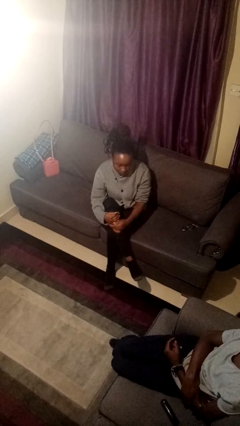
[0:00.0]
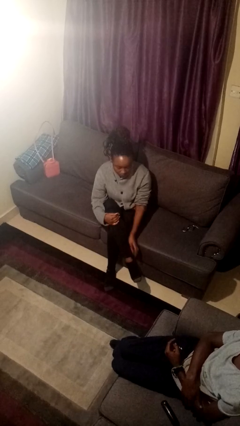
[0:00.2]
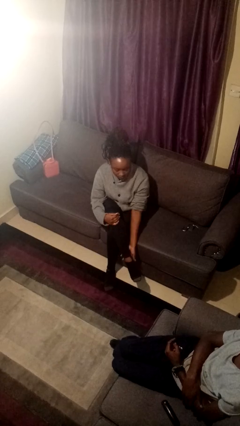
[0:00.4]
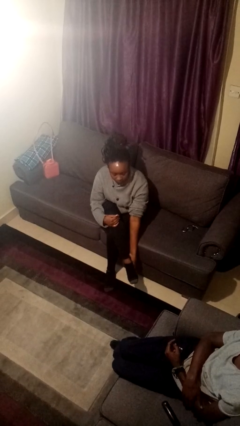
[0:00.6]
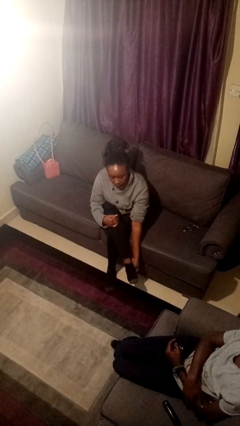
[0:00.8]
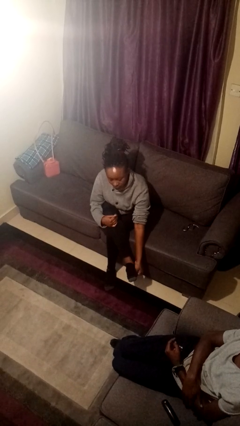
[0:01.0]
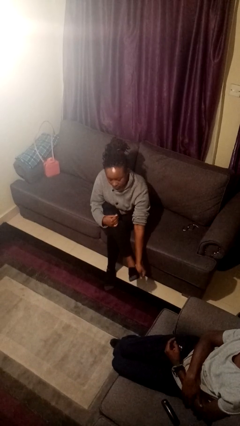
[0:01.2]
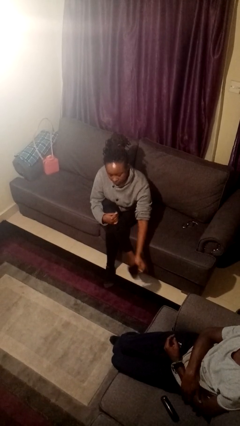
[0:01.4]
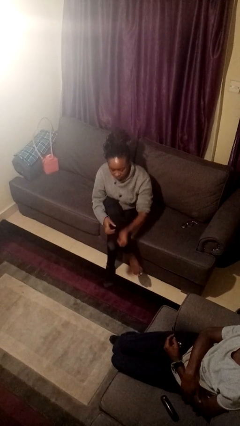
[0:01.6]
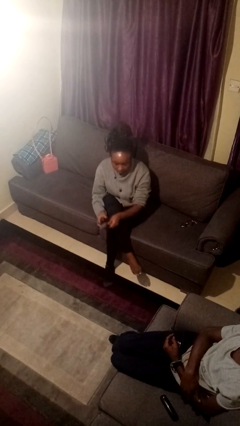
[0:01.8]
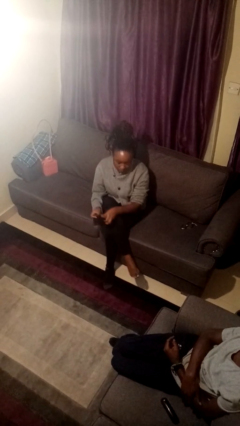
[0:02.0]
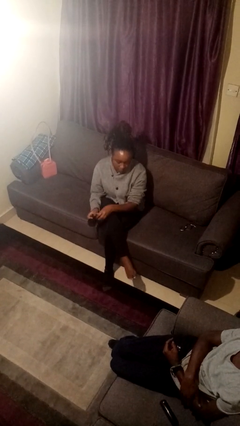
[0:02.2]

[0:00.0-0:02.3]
person takes off socks

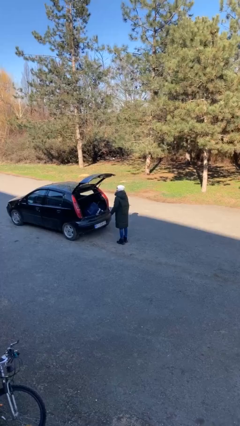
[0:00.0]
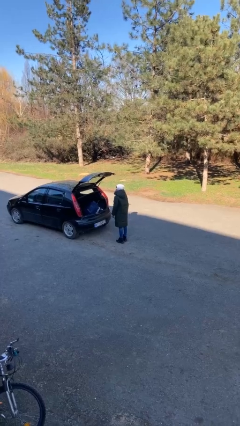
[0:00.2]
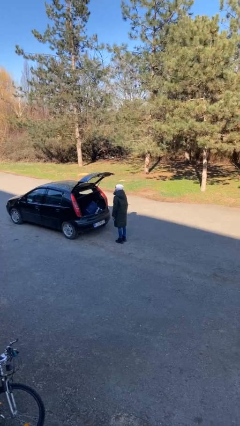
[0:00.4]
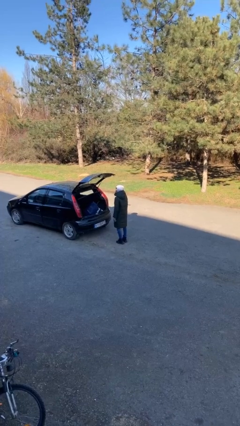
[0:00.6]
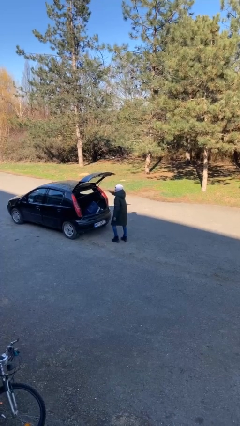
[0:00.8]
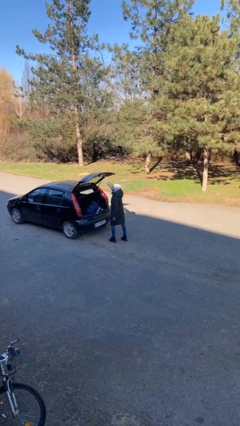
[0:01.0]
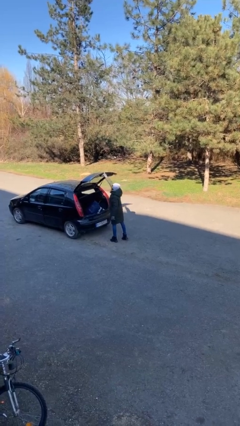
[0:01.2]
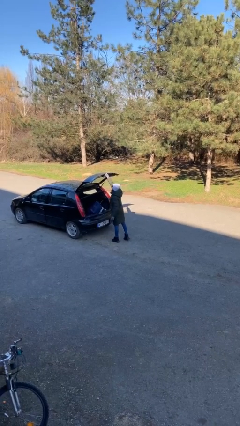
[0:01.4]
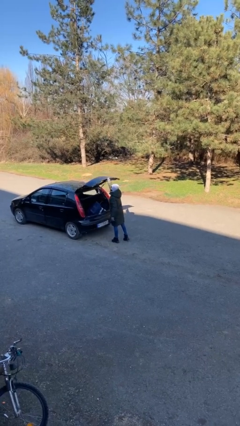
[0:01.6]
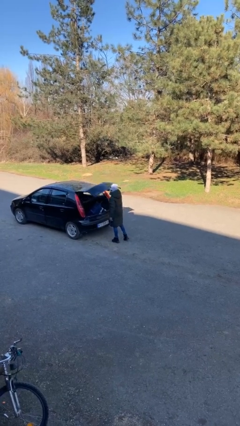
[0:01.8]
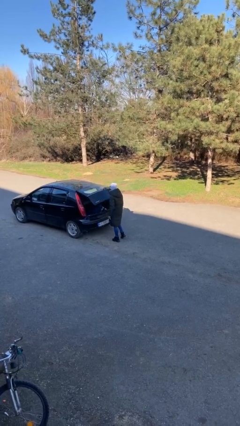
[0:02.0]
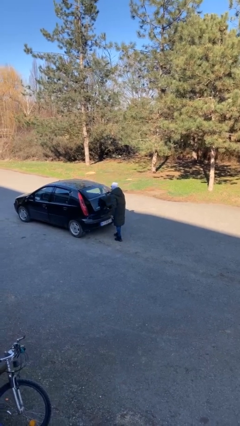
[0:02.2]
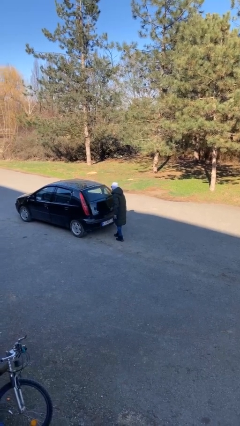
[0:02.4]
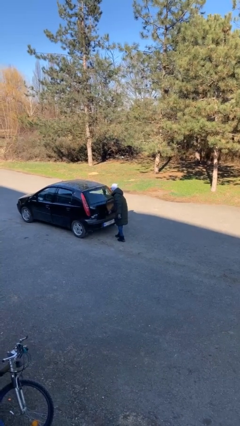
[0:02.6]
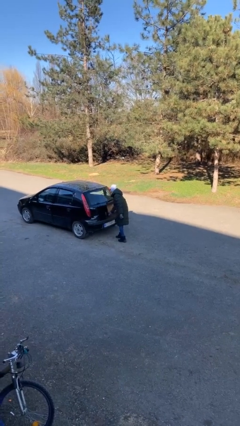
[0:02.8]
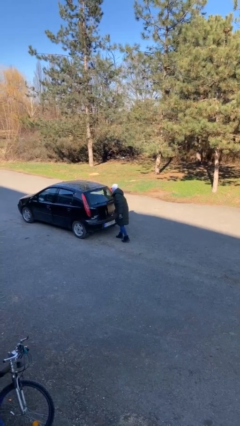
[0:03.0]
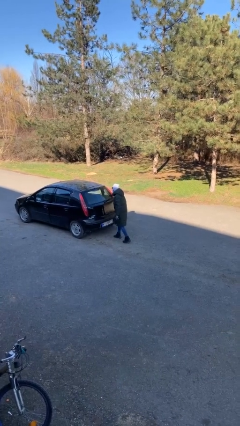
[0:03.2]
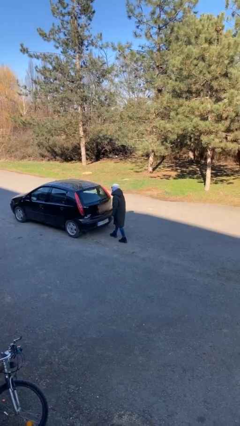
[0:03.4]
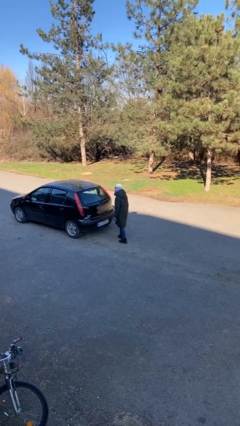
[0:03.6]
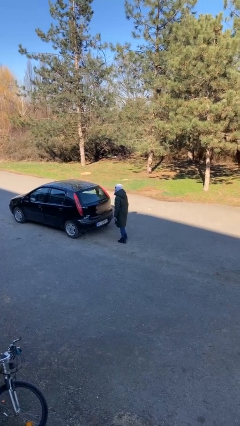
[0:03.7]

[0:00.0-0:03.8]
person closes car trunk

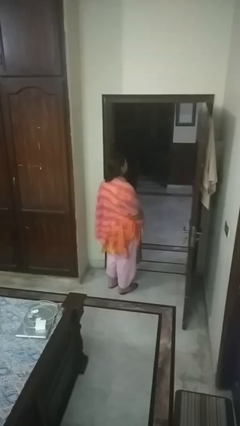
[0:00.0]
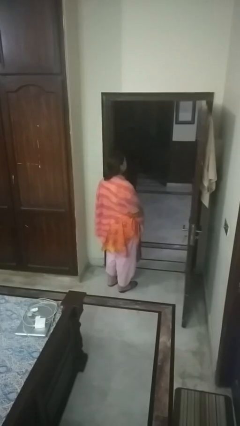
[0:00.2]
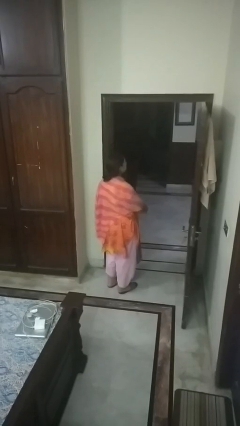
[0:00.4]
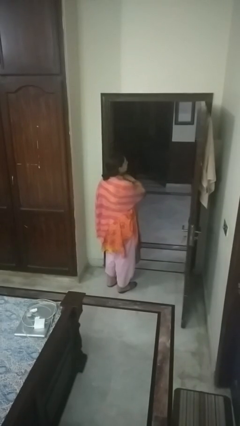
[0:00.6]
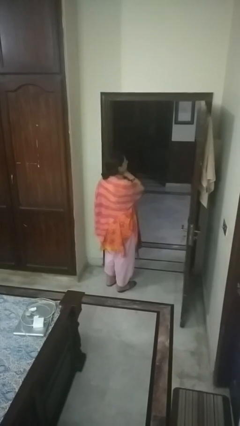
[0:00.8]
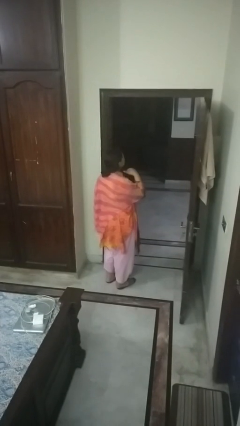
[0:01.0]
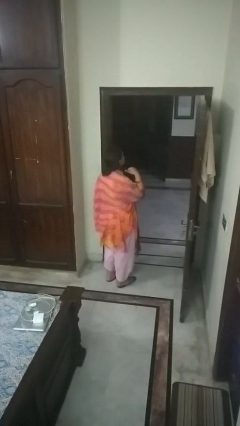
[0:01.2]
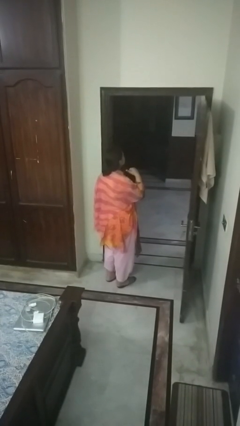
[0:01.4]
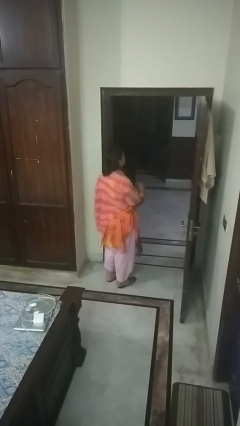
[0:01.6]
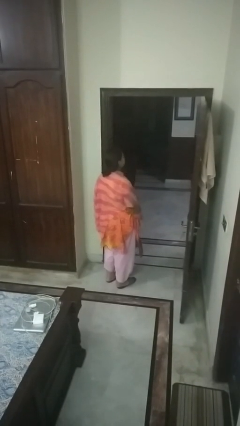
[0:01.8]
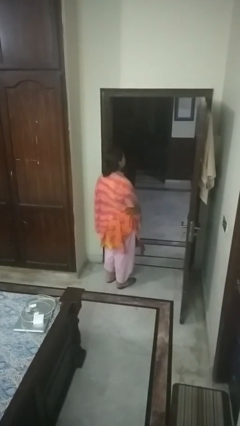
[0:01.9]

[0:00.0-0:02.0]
person gestures cut

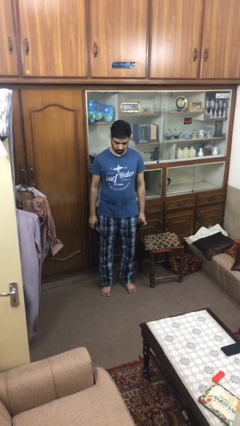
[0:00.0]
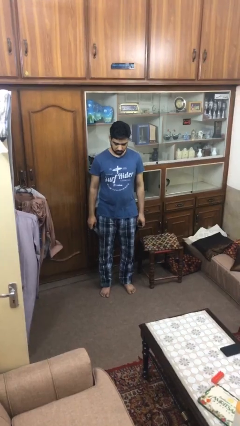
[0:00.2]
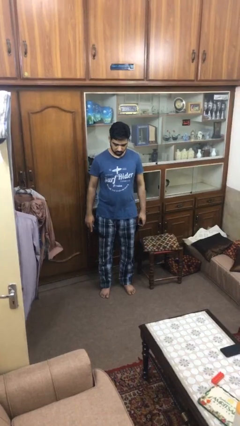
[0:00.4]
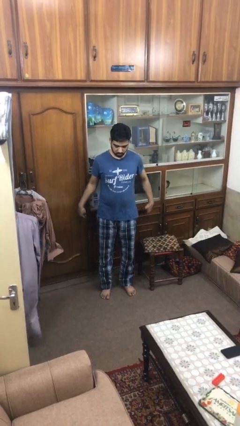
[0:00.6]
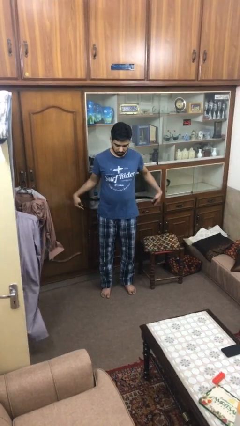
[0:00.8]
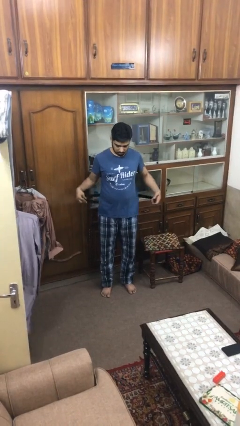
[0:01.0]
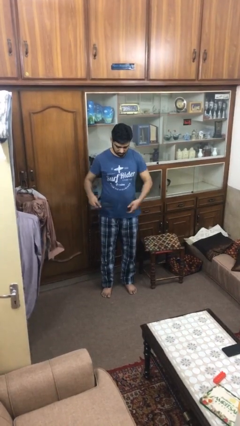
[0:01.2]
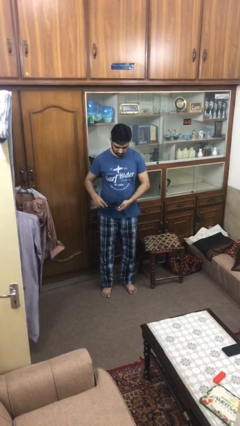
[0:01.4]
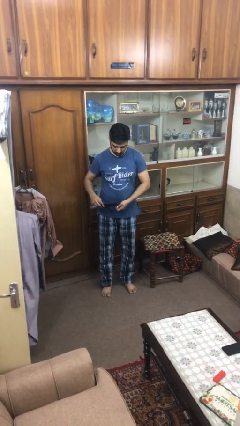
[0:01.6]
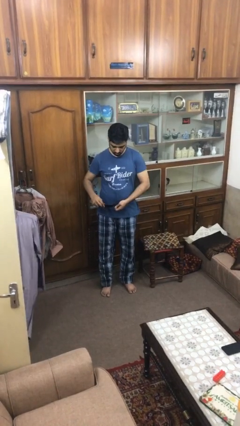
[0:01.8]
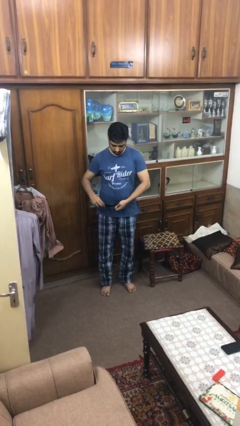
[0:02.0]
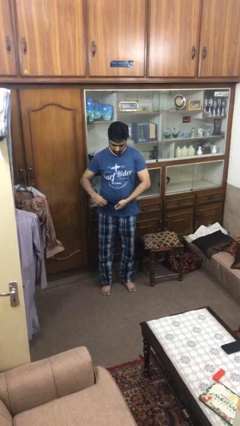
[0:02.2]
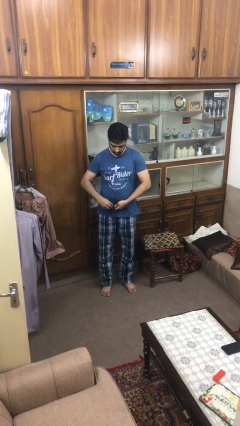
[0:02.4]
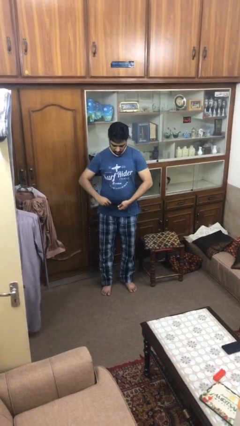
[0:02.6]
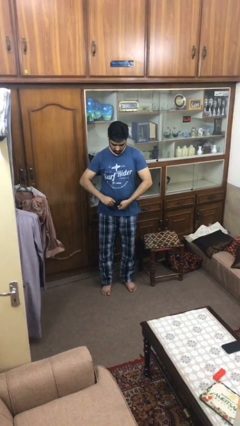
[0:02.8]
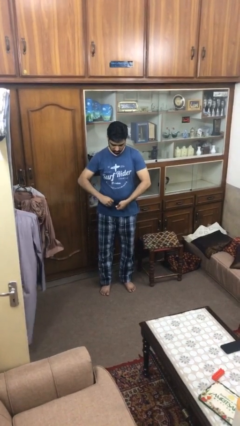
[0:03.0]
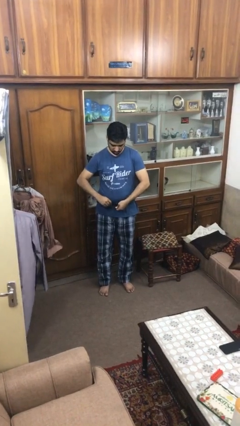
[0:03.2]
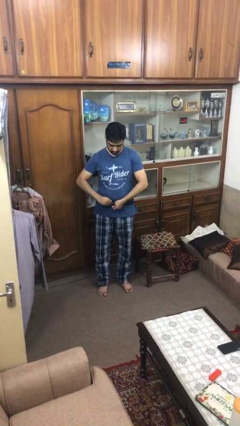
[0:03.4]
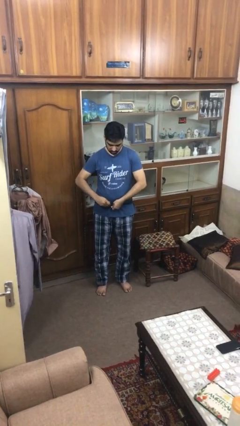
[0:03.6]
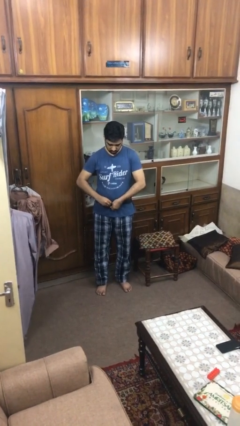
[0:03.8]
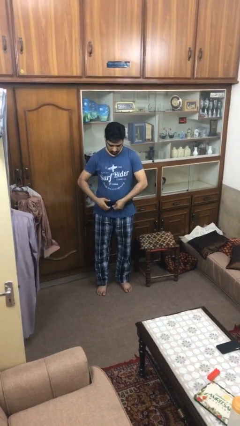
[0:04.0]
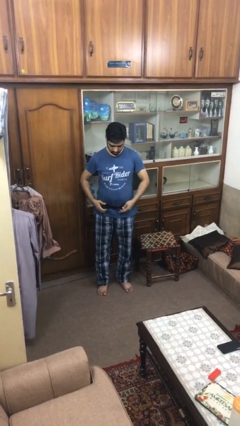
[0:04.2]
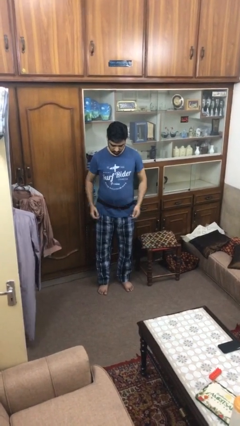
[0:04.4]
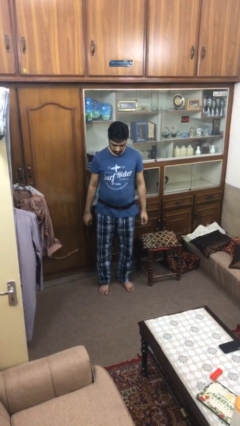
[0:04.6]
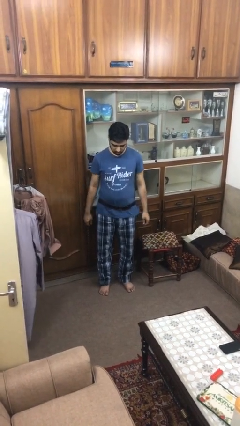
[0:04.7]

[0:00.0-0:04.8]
person puts on belt

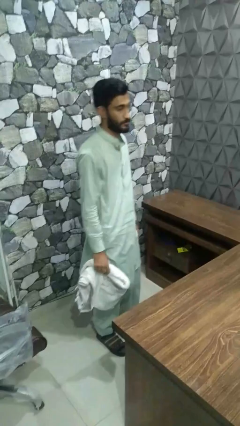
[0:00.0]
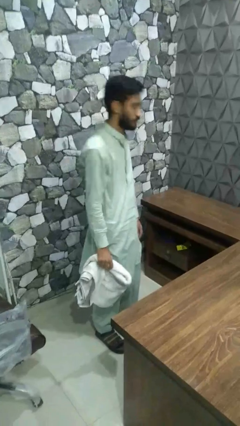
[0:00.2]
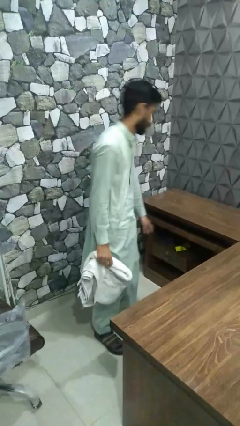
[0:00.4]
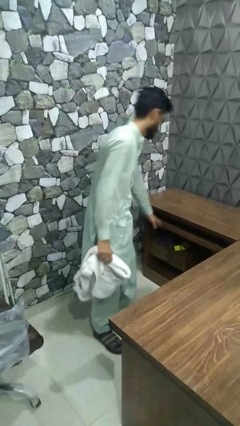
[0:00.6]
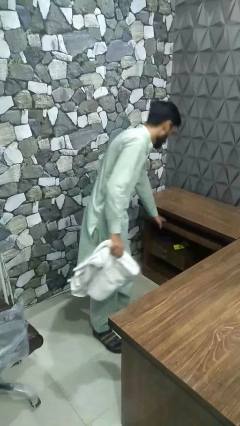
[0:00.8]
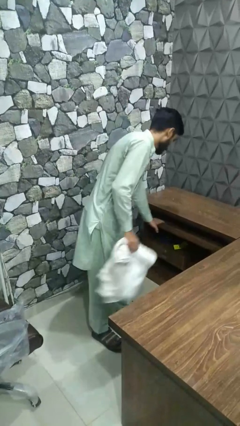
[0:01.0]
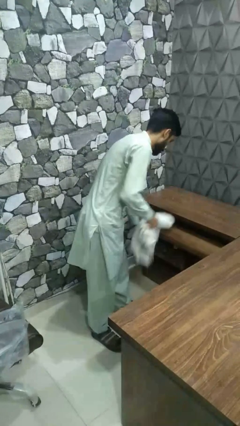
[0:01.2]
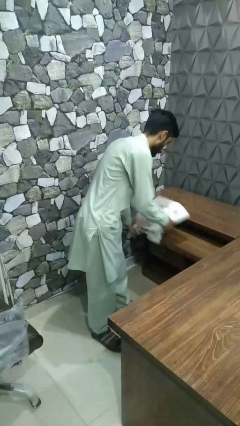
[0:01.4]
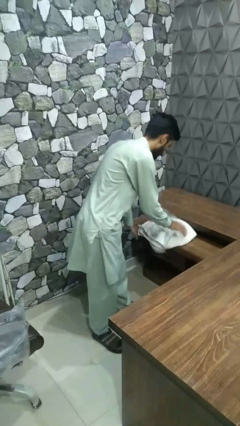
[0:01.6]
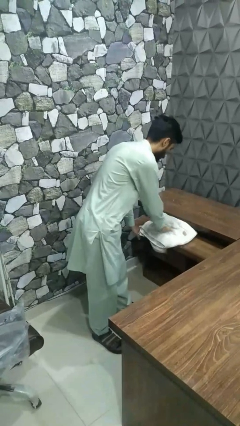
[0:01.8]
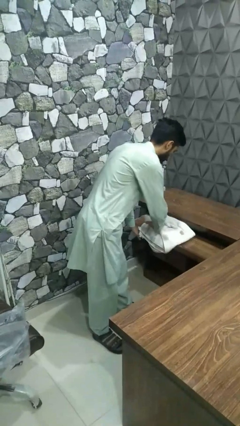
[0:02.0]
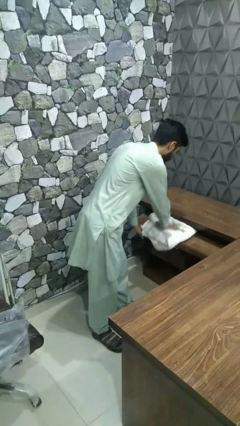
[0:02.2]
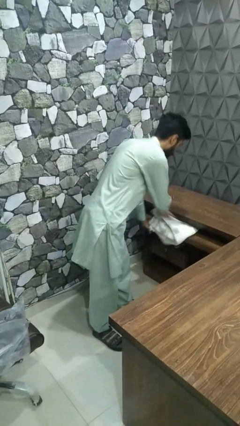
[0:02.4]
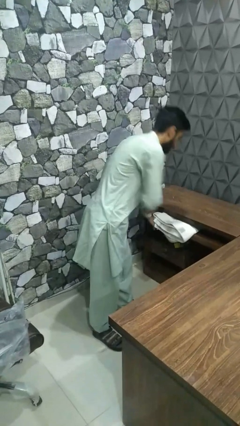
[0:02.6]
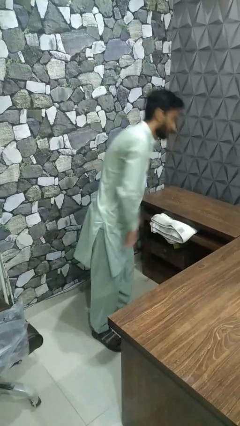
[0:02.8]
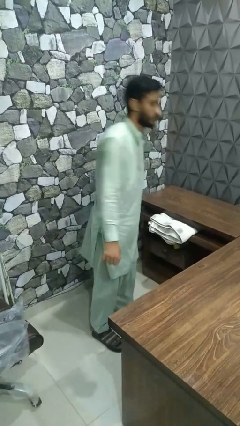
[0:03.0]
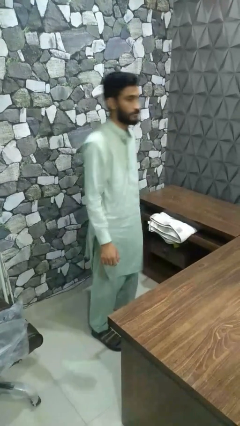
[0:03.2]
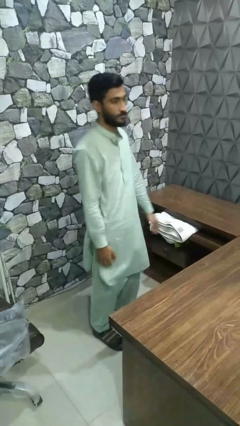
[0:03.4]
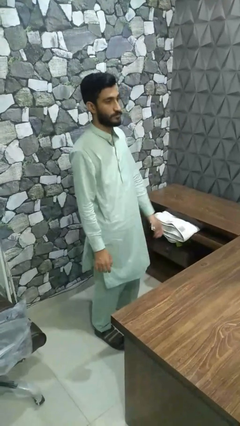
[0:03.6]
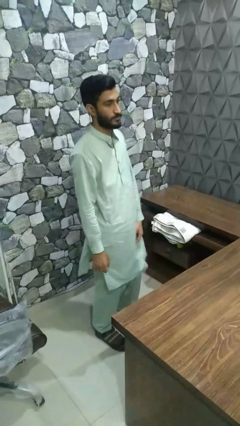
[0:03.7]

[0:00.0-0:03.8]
person puts clothes into dresser

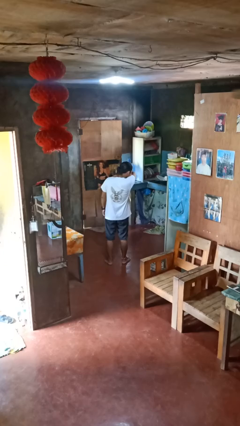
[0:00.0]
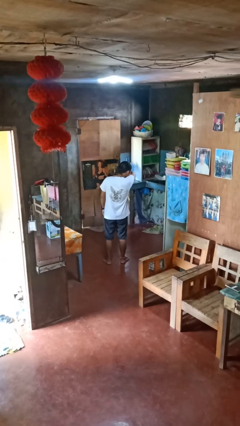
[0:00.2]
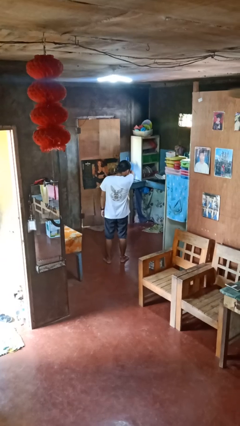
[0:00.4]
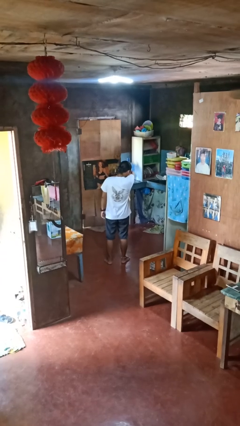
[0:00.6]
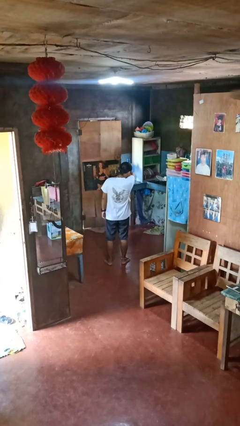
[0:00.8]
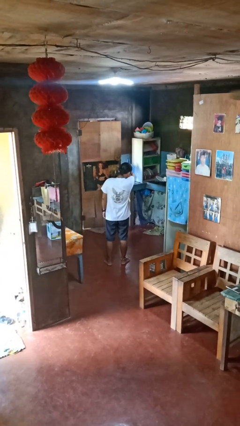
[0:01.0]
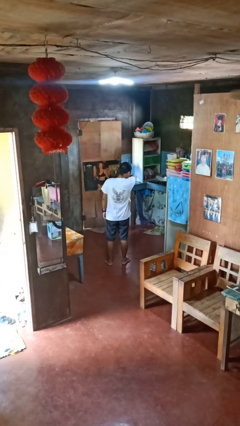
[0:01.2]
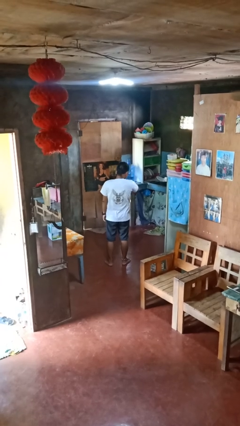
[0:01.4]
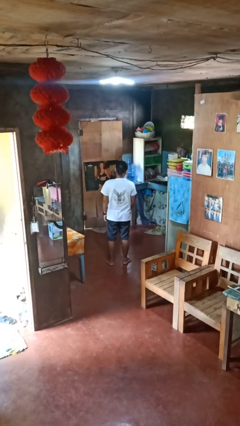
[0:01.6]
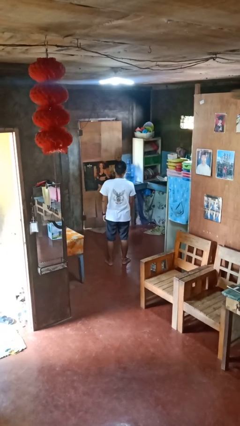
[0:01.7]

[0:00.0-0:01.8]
person sneezes into arm
